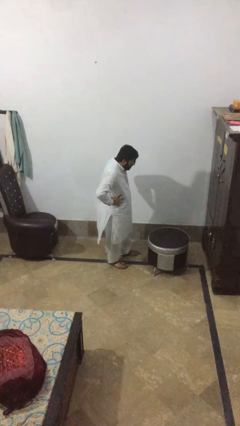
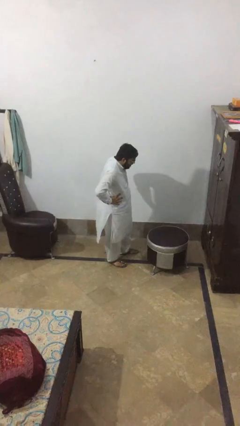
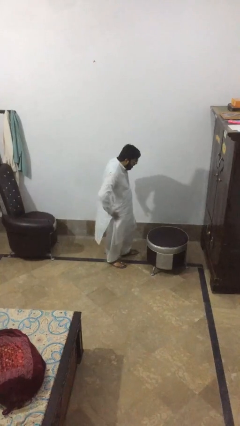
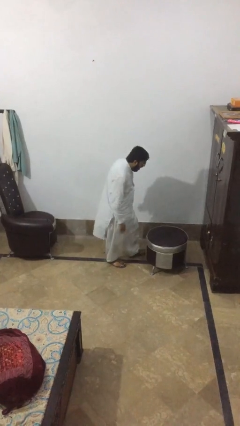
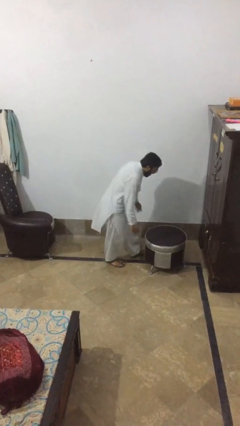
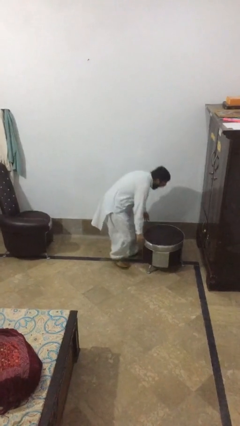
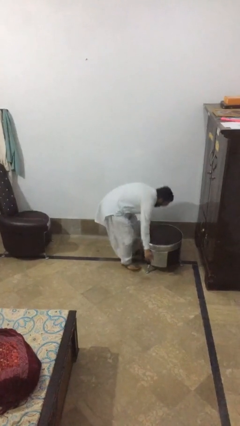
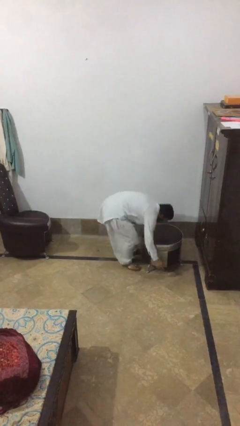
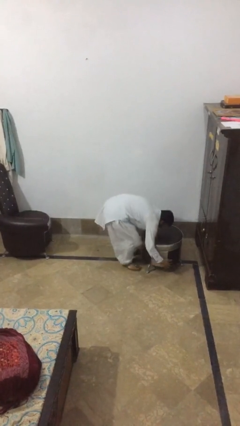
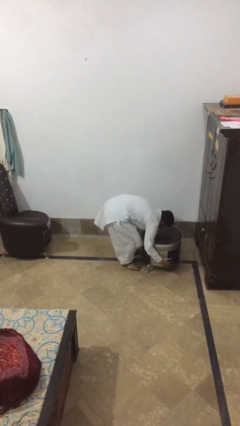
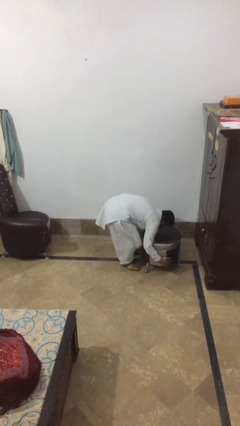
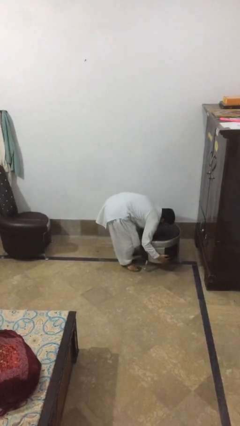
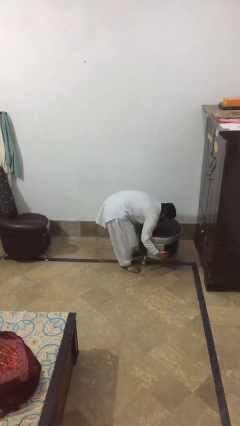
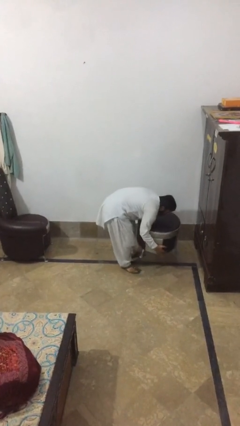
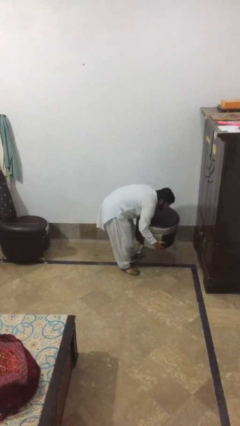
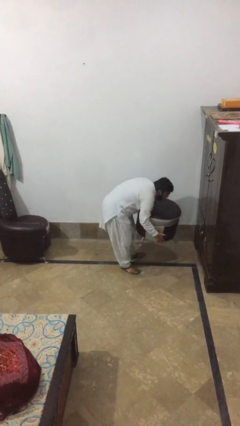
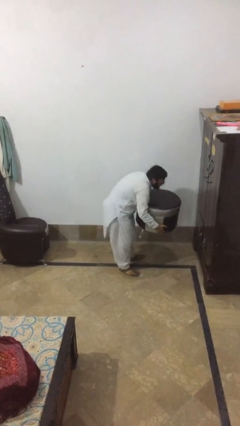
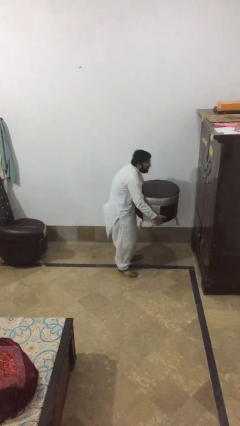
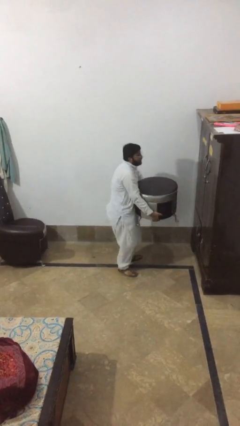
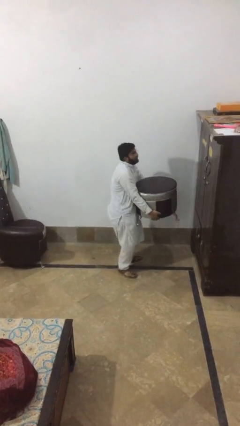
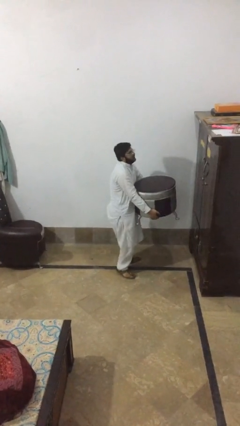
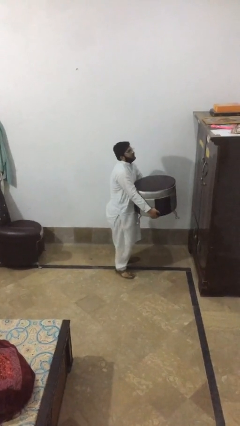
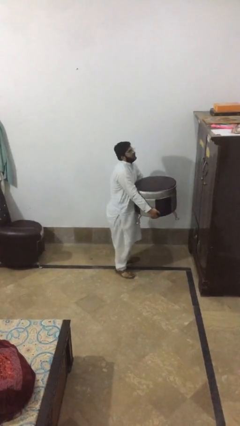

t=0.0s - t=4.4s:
person picks up object from floor

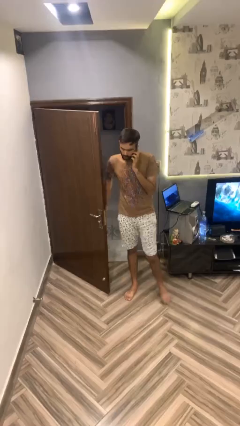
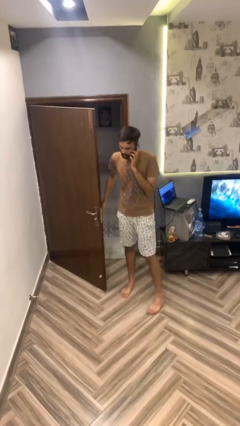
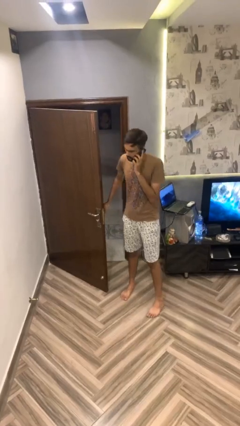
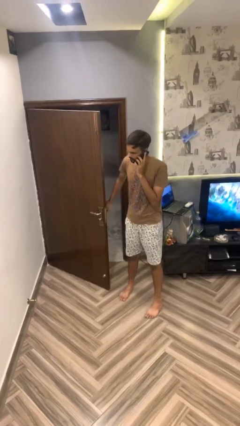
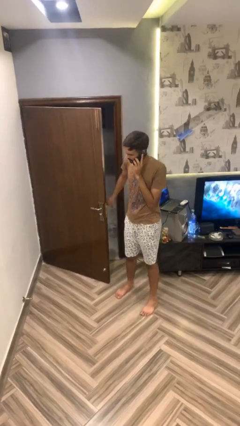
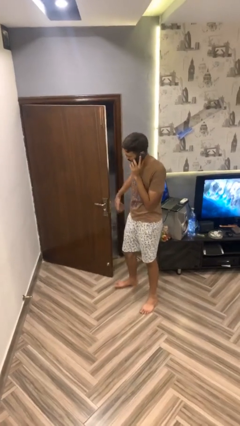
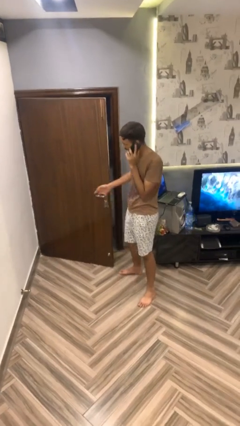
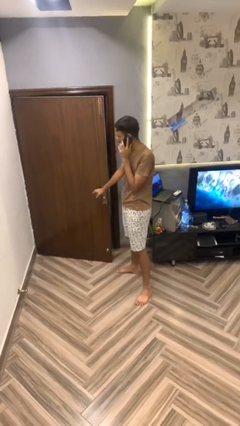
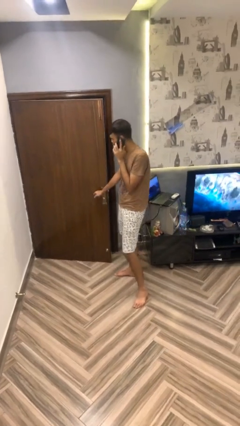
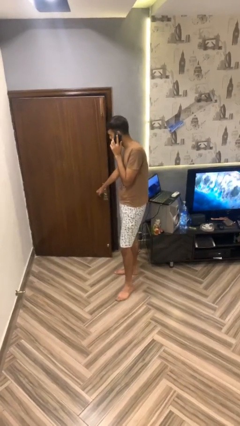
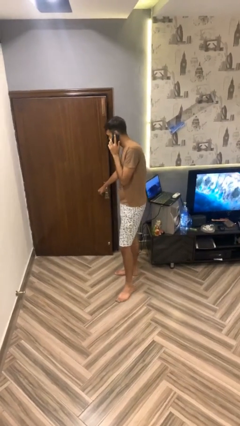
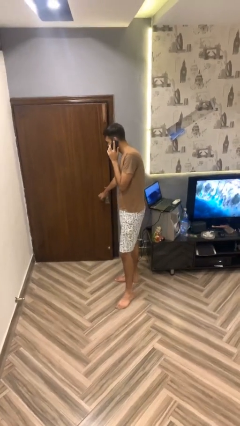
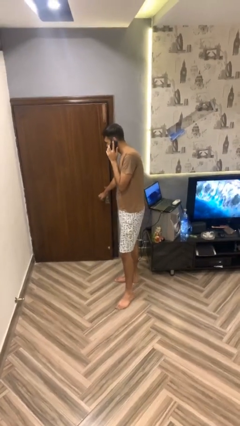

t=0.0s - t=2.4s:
person closes facility door

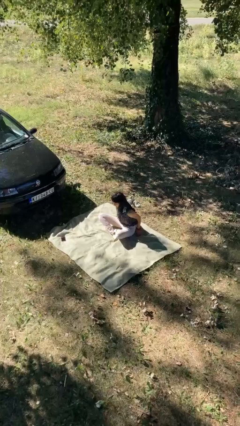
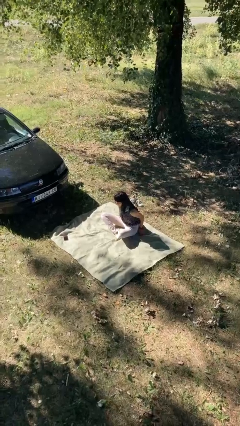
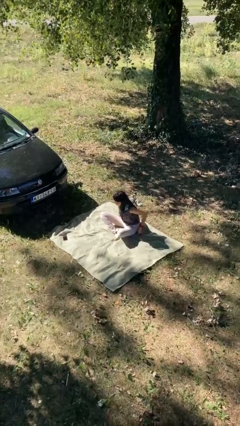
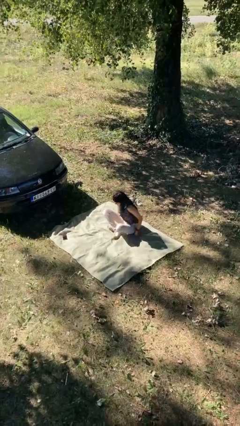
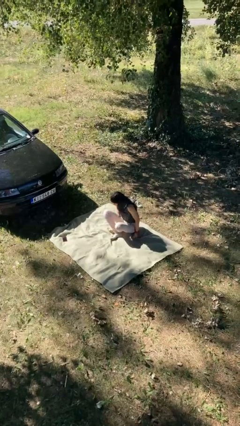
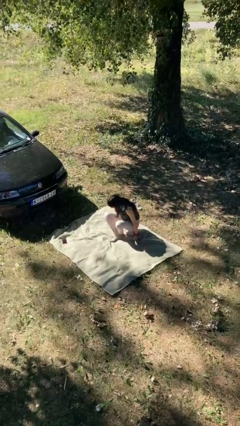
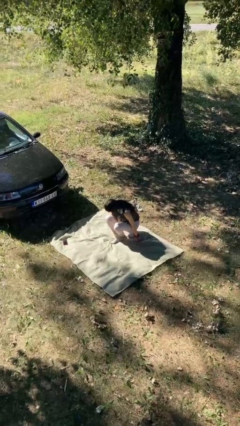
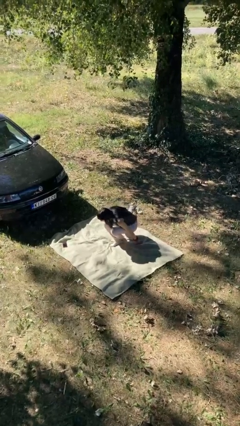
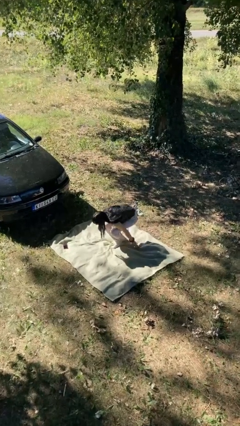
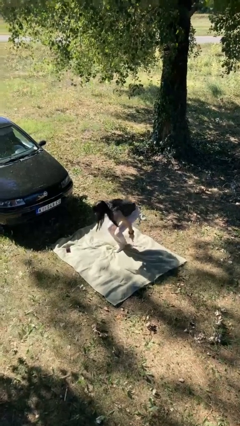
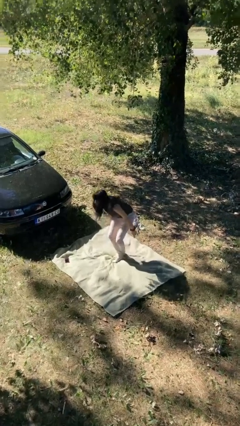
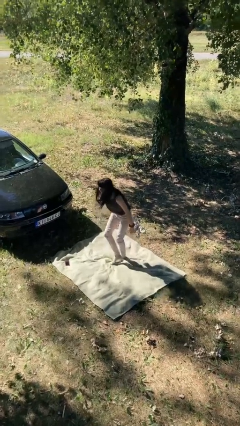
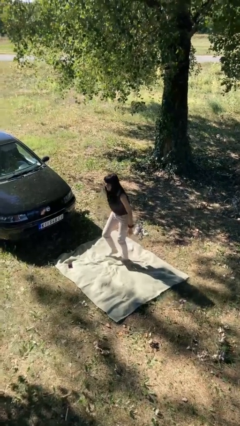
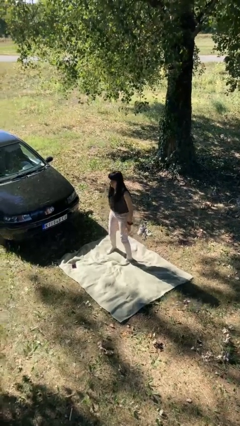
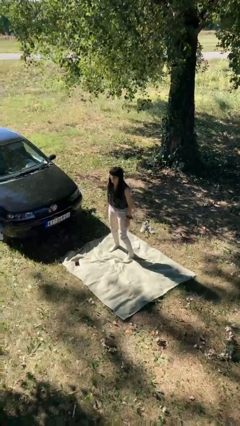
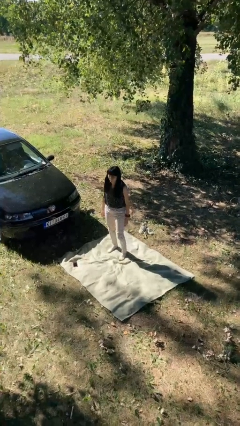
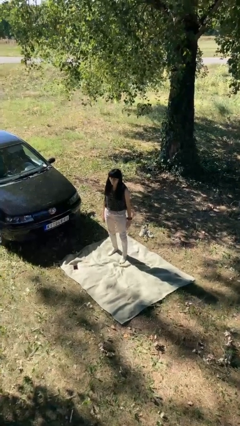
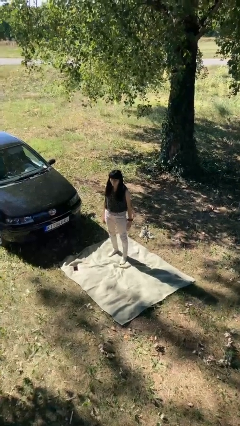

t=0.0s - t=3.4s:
person stands up from floor

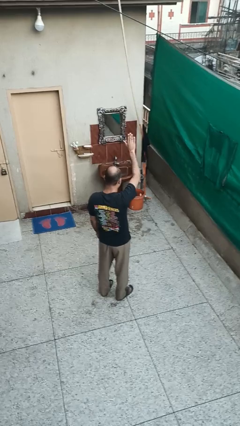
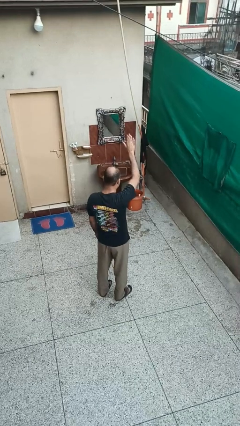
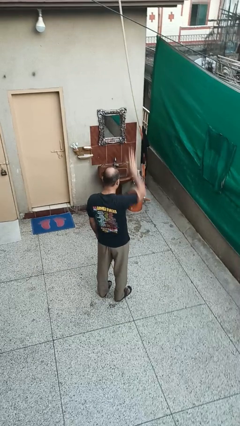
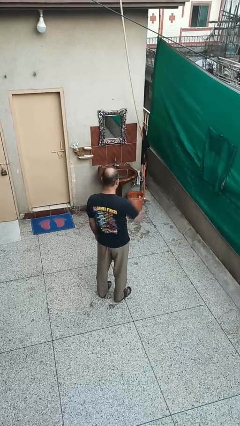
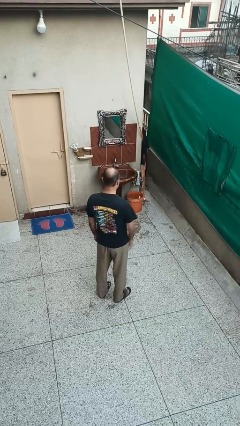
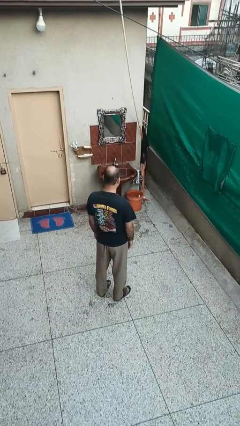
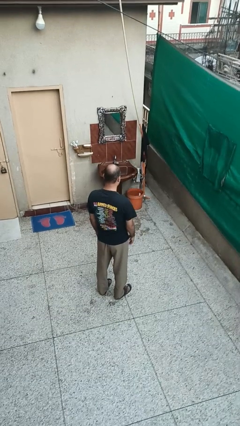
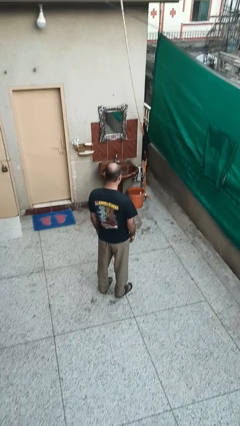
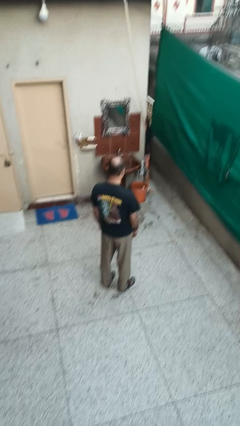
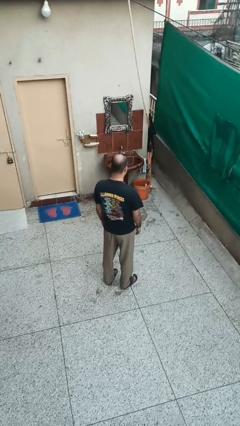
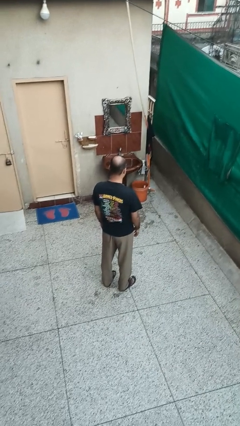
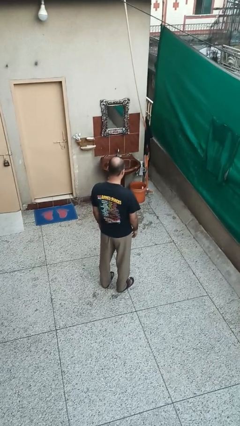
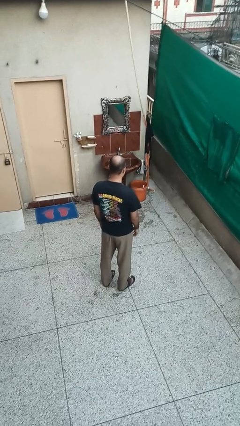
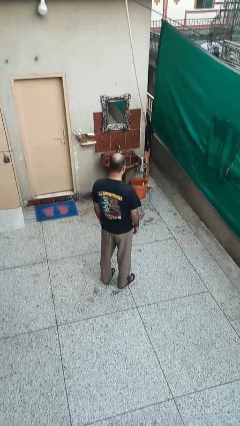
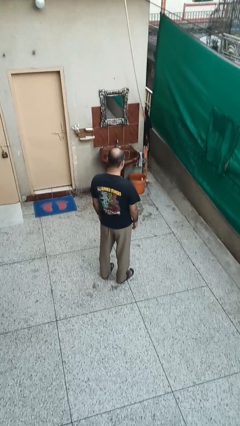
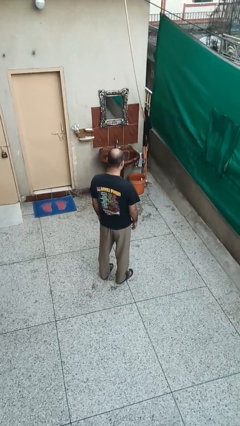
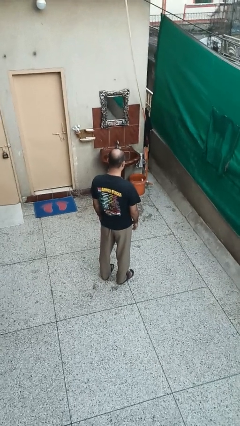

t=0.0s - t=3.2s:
person gestures lower hand

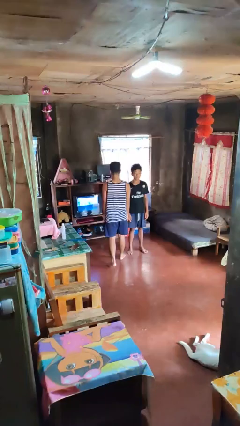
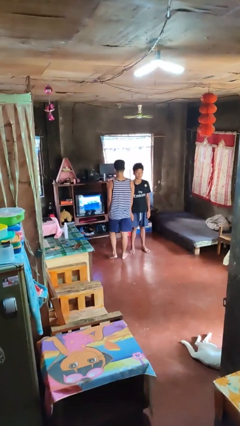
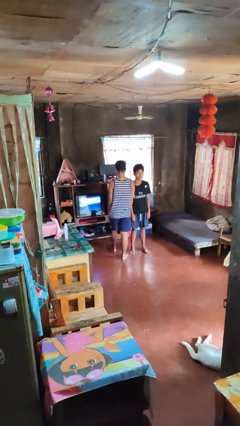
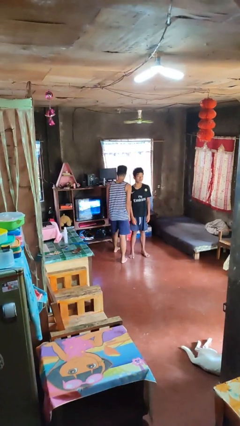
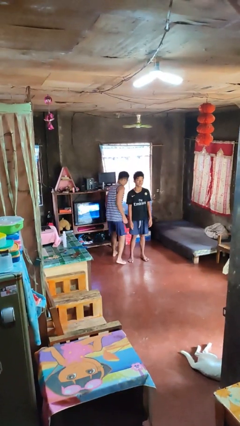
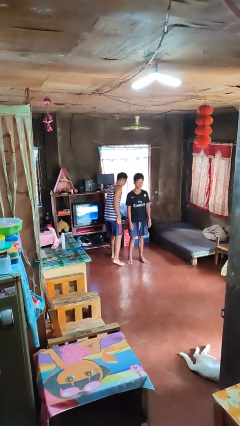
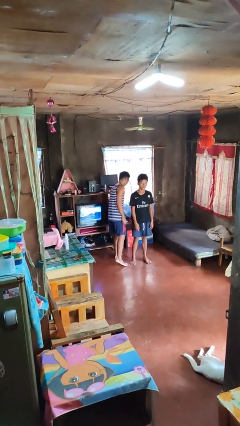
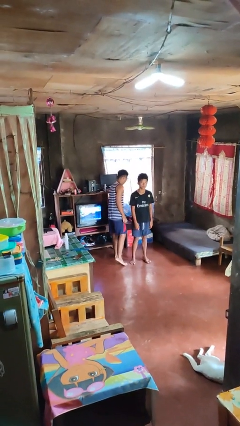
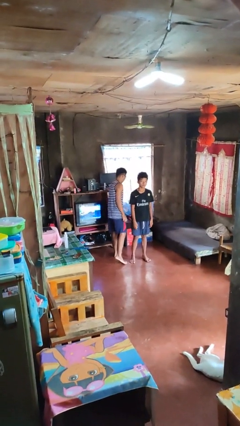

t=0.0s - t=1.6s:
person bumps into person

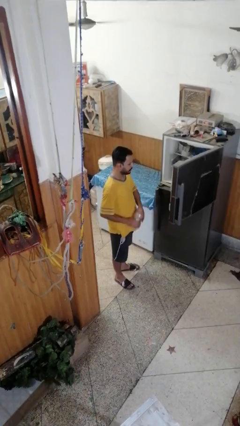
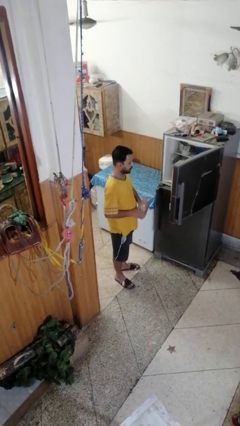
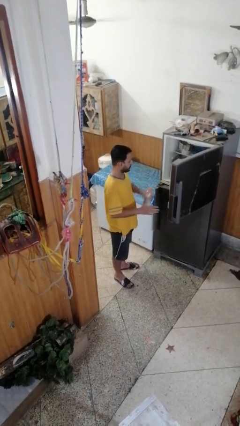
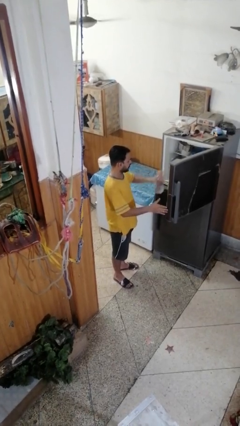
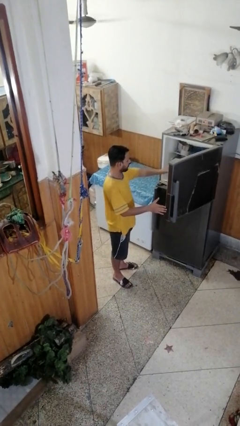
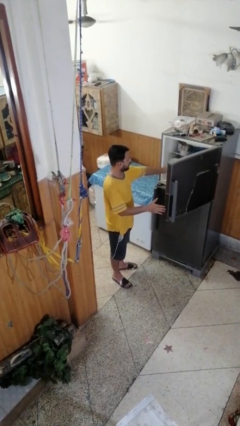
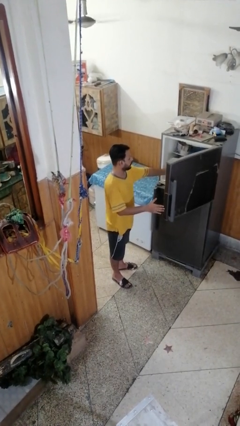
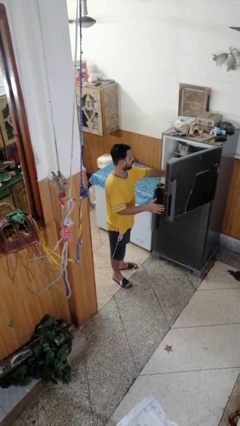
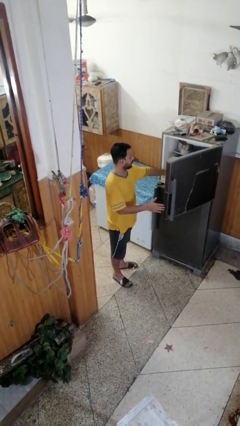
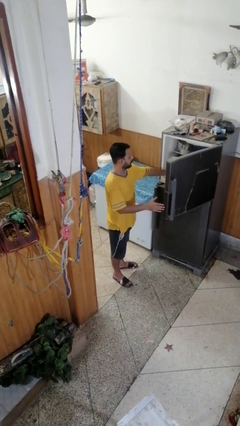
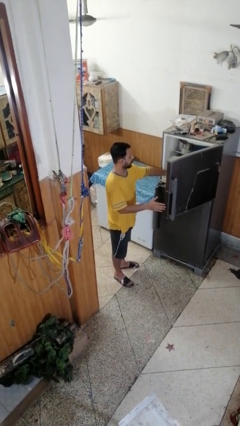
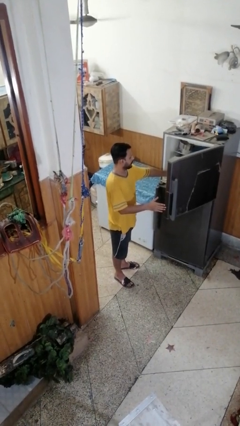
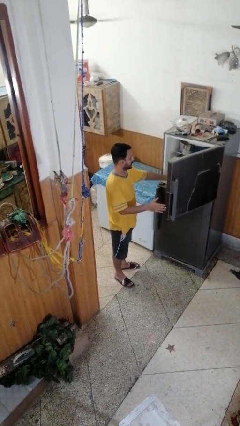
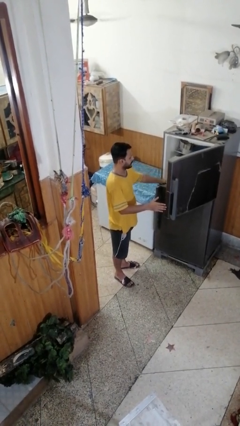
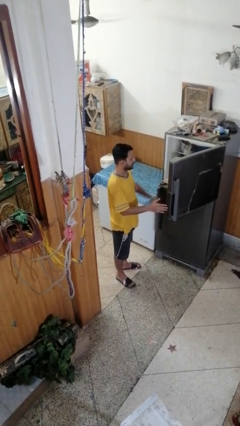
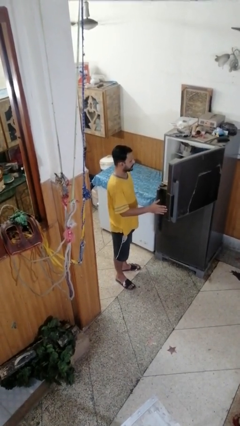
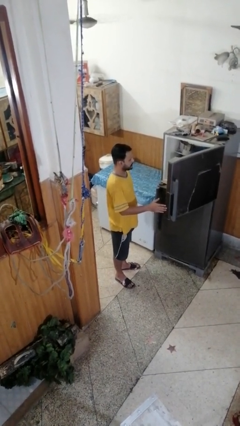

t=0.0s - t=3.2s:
person puts object into refrigerator
